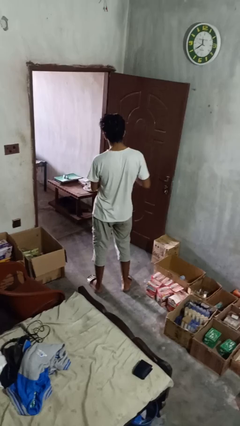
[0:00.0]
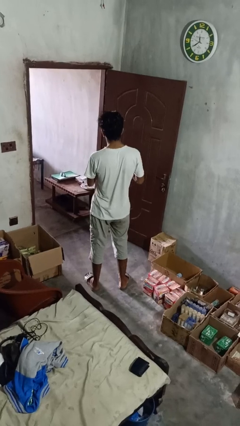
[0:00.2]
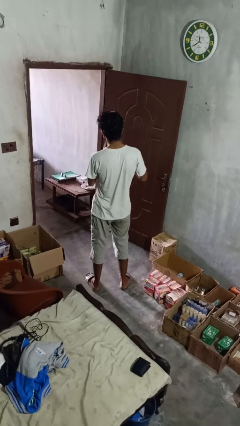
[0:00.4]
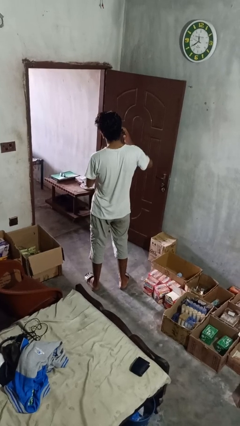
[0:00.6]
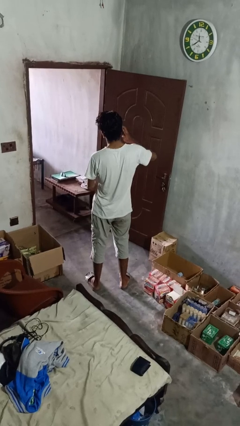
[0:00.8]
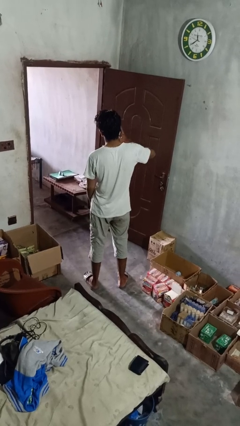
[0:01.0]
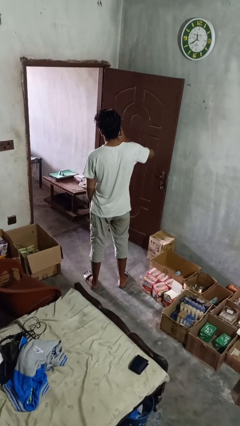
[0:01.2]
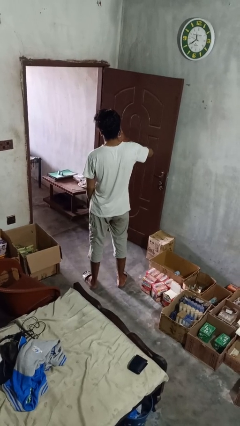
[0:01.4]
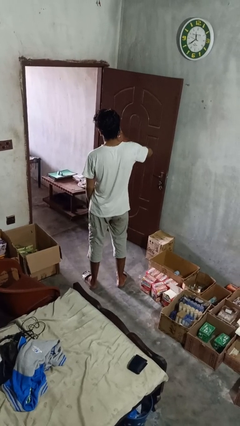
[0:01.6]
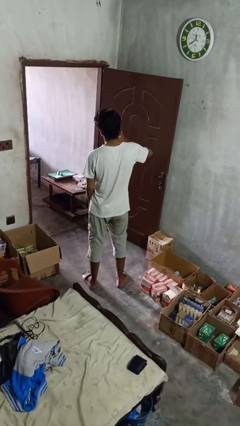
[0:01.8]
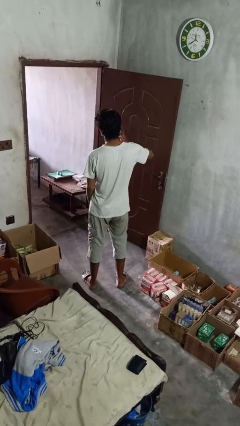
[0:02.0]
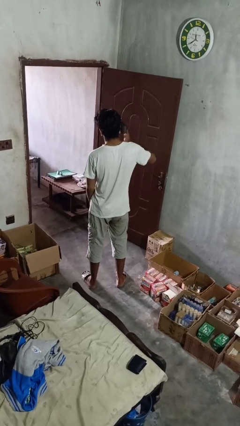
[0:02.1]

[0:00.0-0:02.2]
person takes phone from pocket

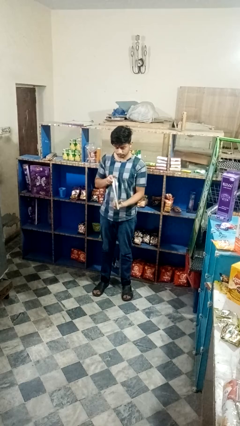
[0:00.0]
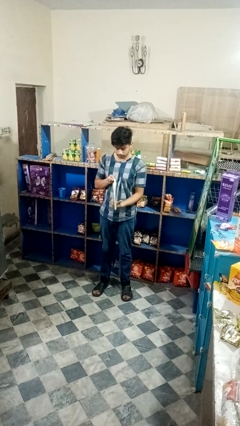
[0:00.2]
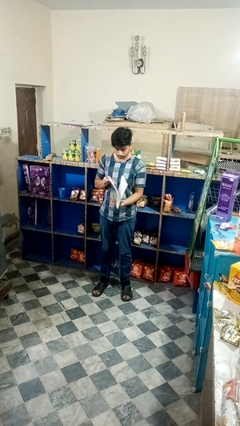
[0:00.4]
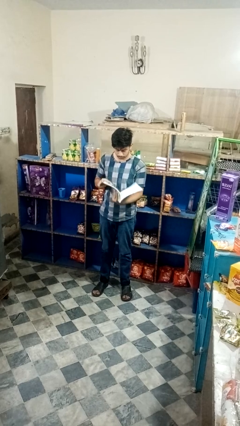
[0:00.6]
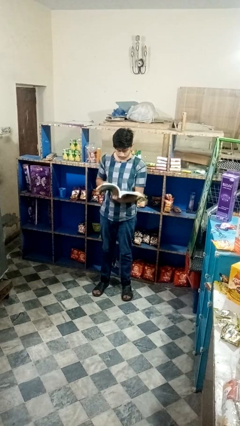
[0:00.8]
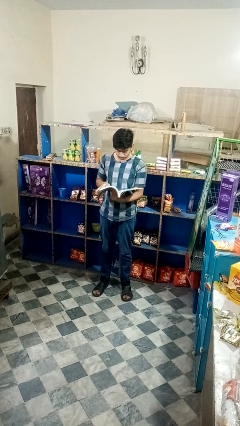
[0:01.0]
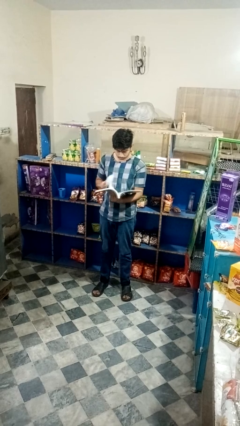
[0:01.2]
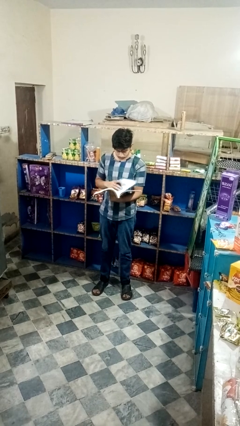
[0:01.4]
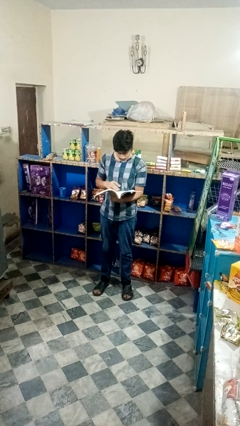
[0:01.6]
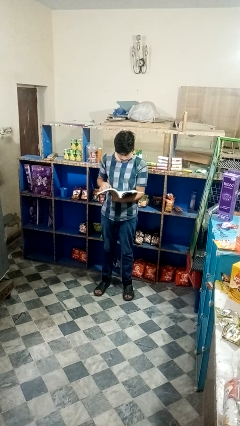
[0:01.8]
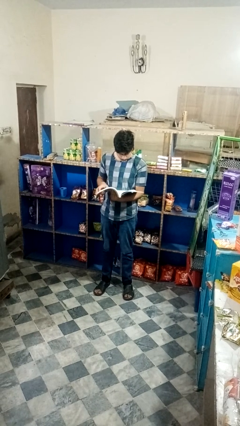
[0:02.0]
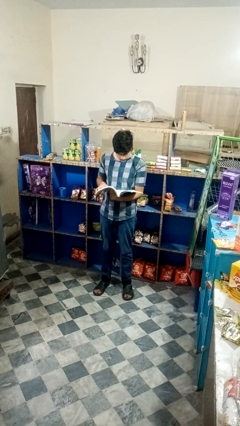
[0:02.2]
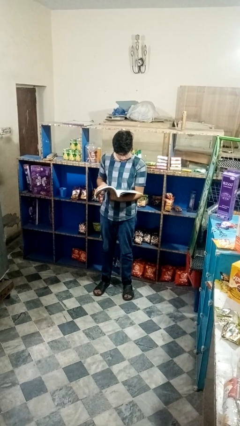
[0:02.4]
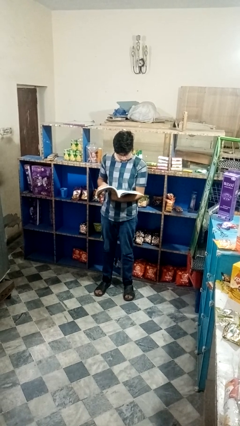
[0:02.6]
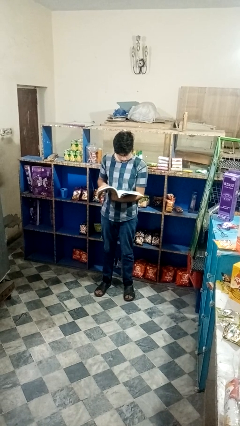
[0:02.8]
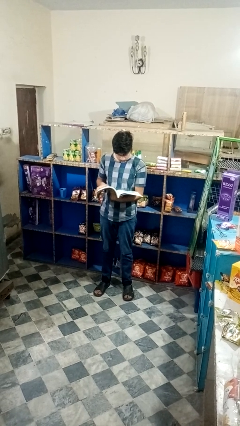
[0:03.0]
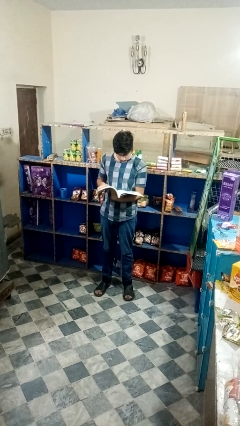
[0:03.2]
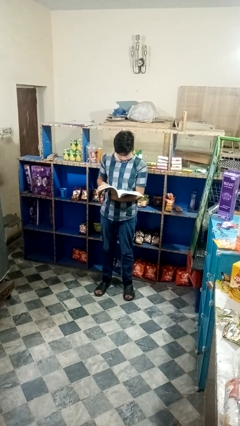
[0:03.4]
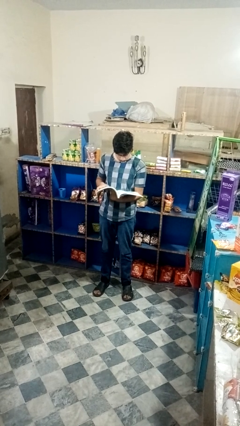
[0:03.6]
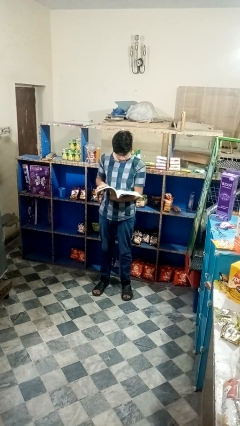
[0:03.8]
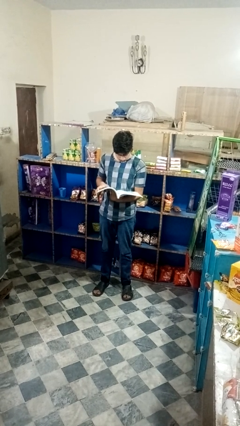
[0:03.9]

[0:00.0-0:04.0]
person reads magazine

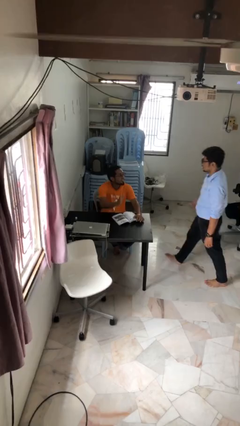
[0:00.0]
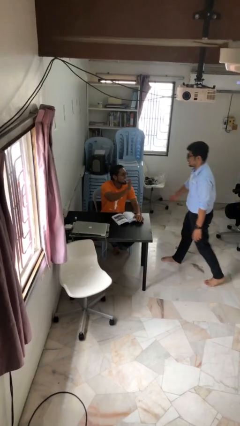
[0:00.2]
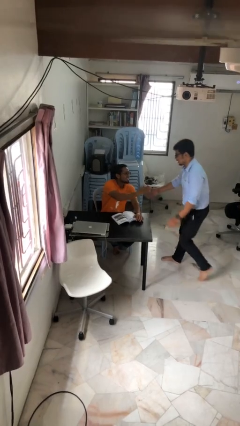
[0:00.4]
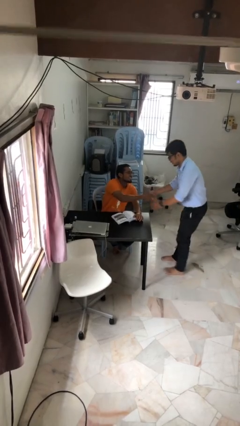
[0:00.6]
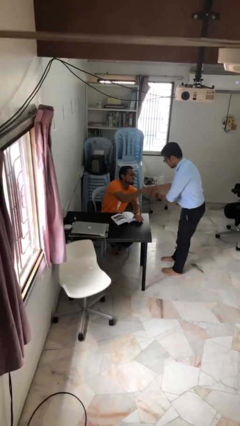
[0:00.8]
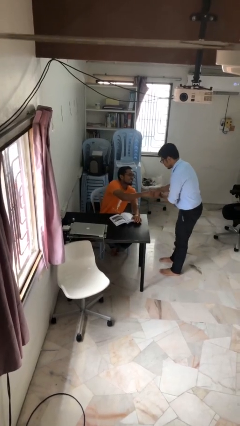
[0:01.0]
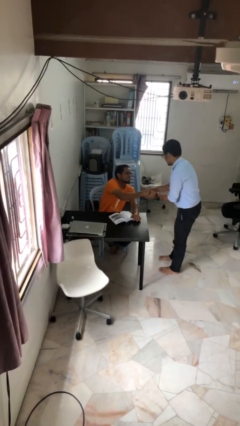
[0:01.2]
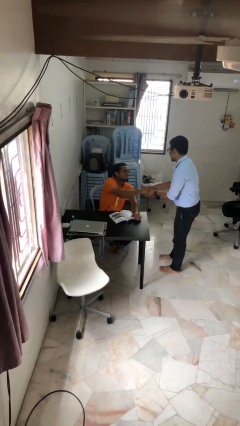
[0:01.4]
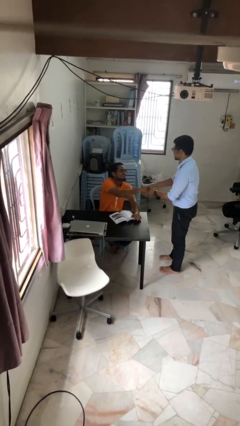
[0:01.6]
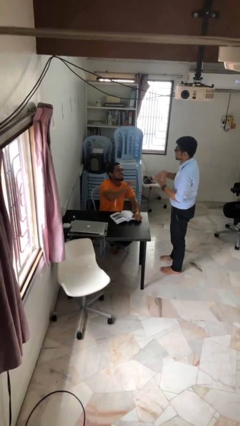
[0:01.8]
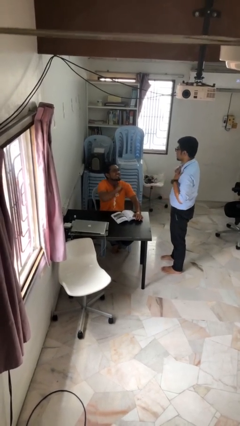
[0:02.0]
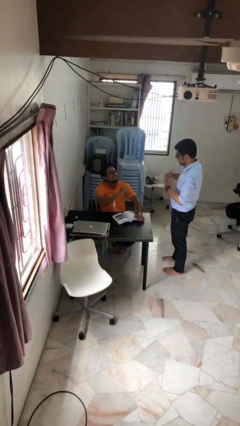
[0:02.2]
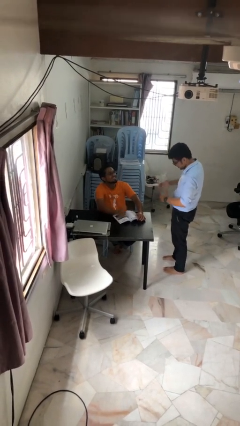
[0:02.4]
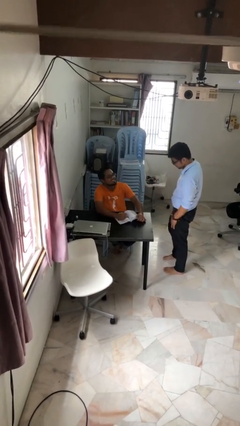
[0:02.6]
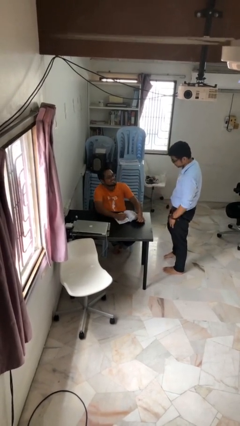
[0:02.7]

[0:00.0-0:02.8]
person shakes hand

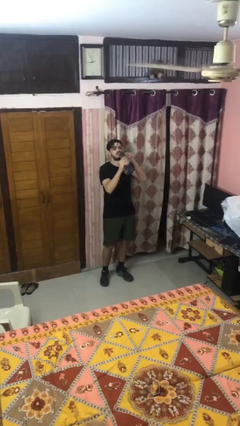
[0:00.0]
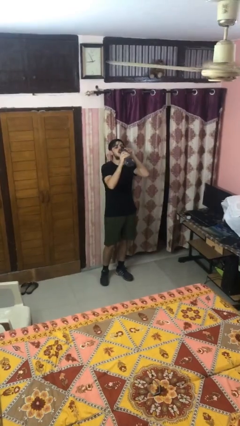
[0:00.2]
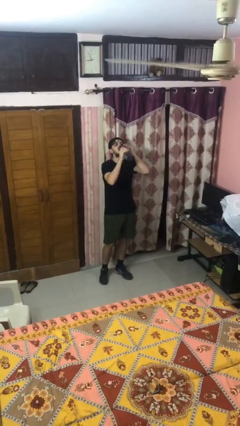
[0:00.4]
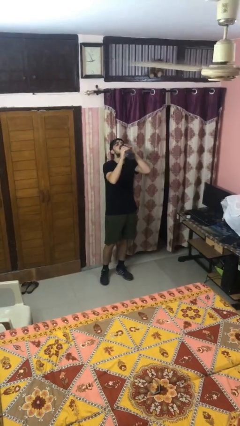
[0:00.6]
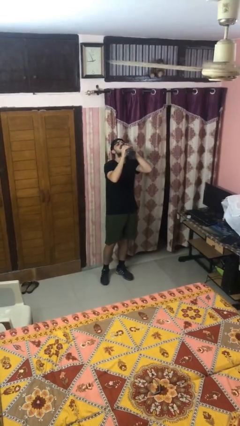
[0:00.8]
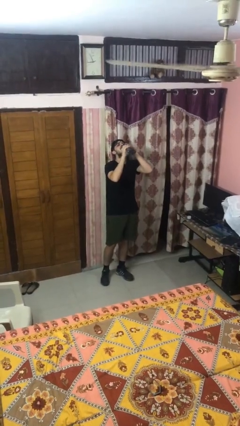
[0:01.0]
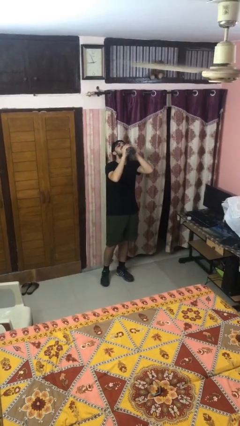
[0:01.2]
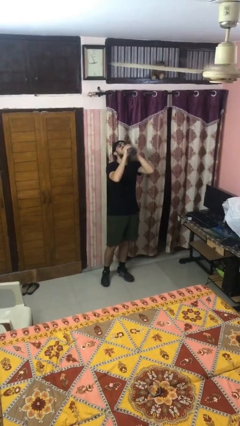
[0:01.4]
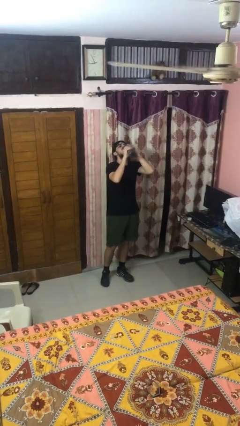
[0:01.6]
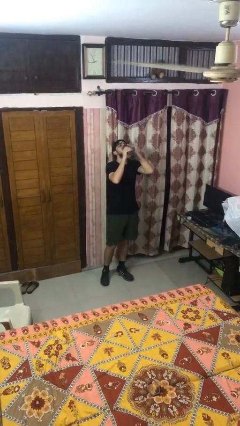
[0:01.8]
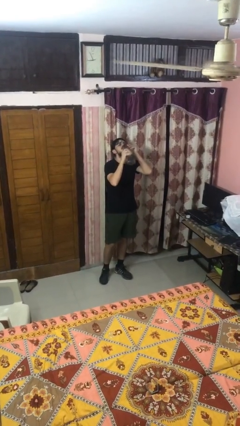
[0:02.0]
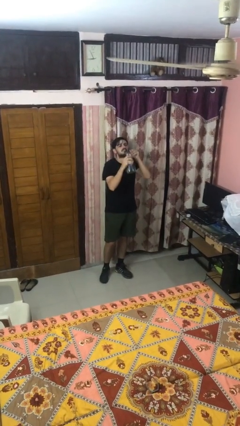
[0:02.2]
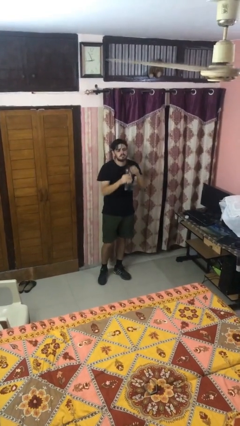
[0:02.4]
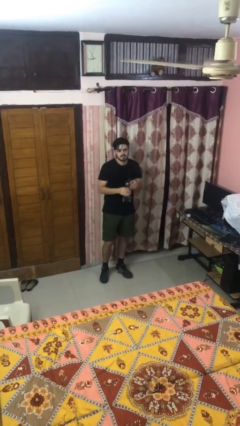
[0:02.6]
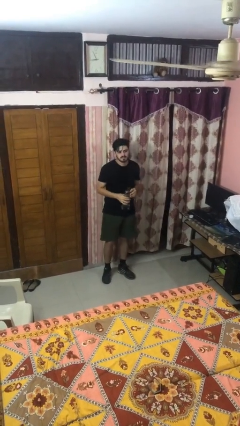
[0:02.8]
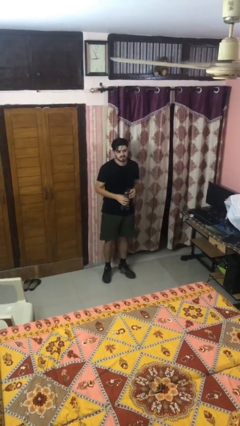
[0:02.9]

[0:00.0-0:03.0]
person drinks from bottle

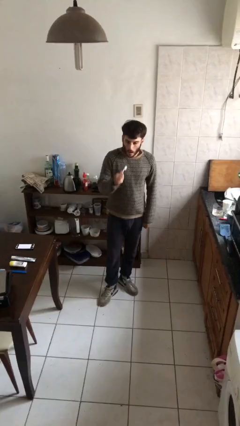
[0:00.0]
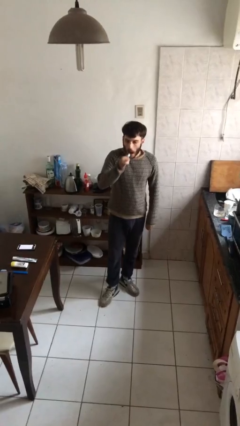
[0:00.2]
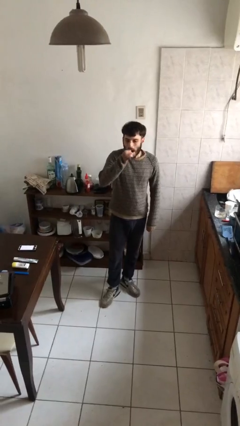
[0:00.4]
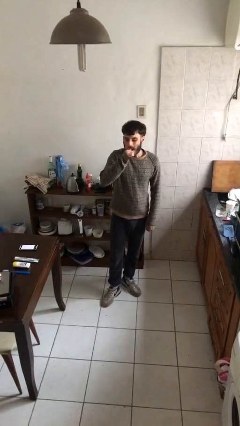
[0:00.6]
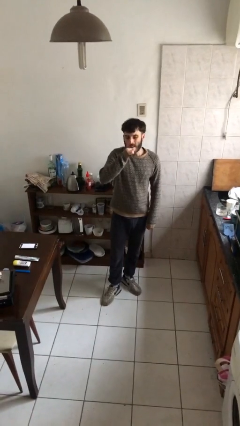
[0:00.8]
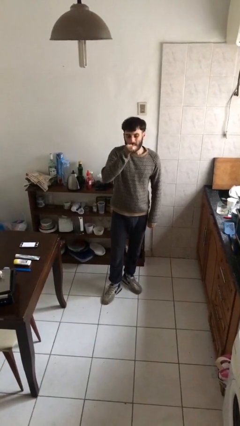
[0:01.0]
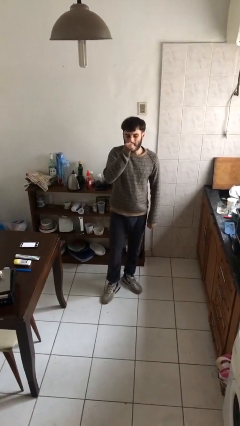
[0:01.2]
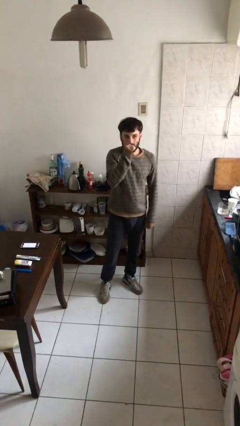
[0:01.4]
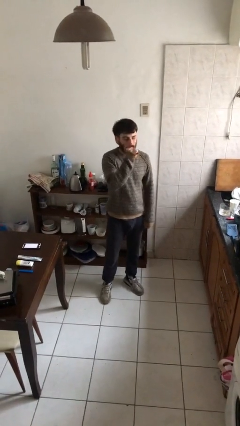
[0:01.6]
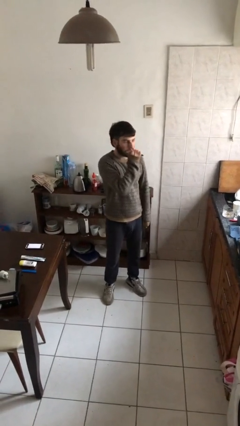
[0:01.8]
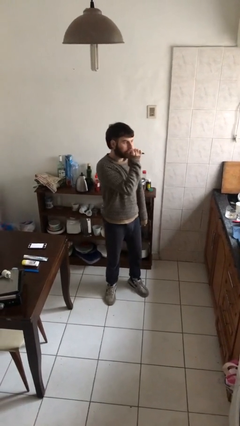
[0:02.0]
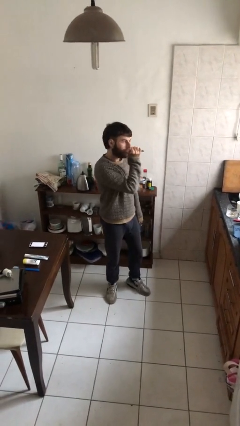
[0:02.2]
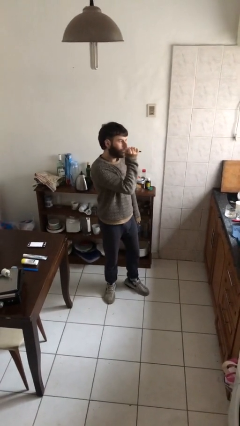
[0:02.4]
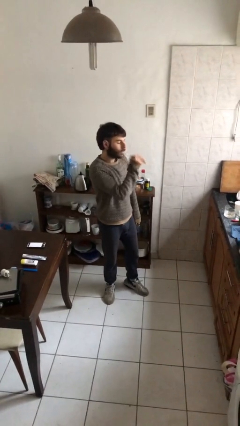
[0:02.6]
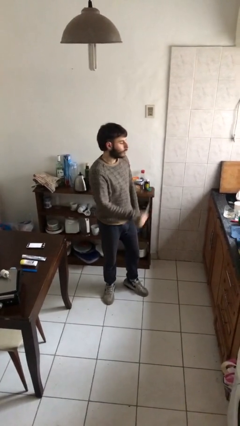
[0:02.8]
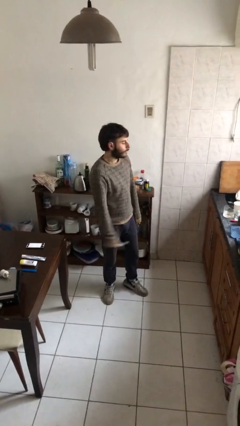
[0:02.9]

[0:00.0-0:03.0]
person brushes teeth

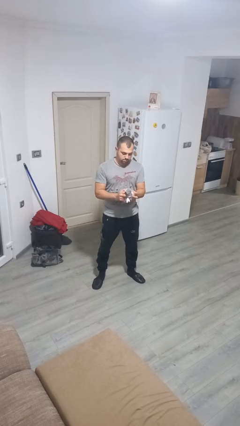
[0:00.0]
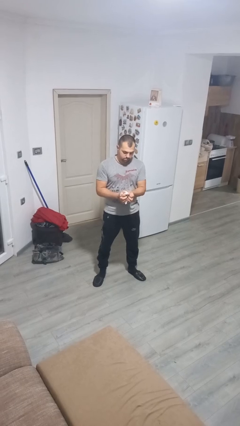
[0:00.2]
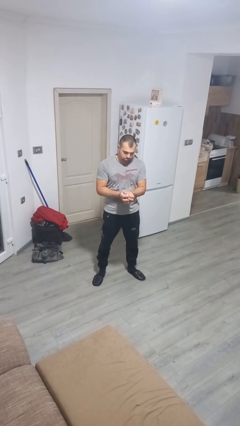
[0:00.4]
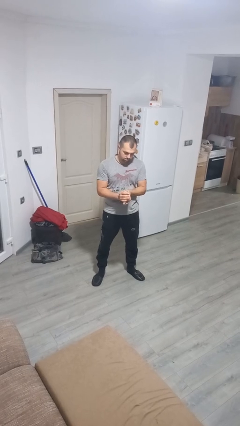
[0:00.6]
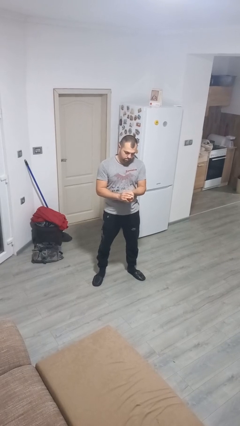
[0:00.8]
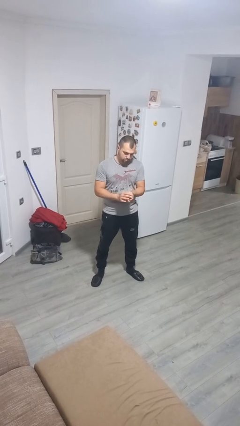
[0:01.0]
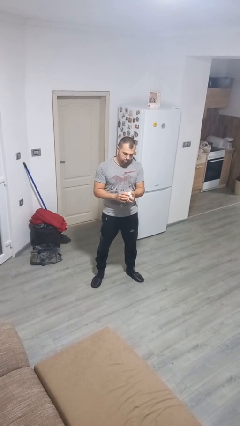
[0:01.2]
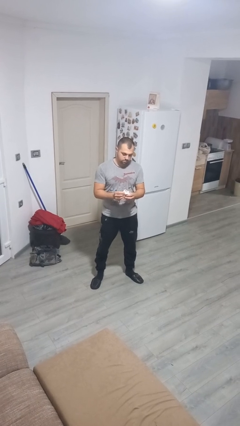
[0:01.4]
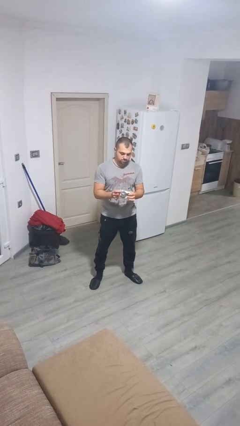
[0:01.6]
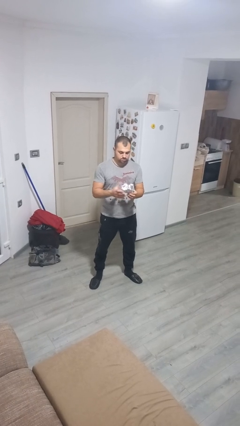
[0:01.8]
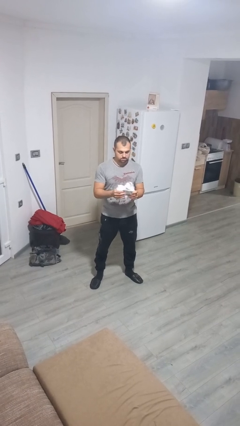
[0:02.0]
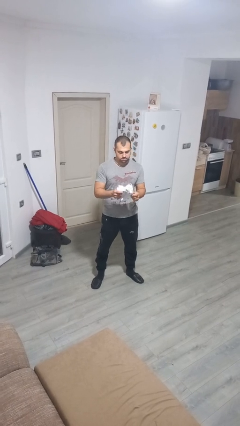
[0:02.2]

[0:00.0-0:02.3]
person crumples paper

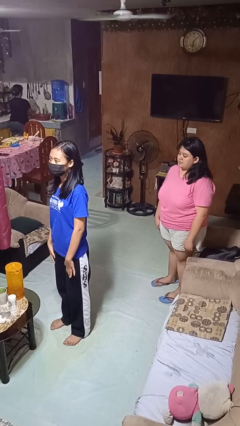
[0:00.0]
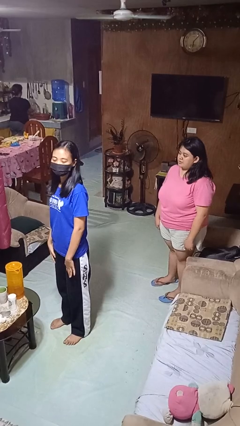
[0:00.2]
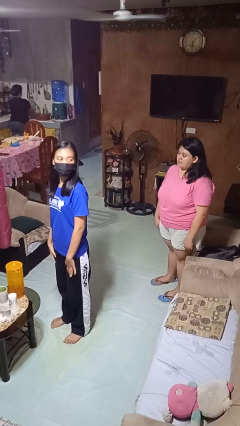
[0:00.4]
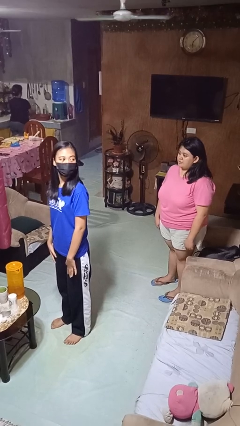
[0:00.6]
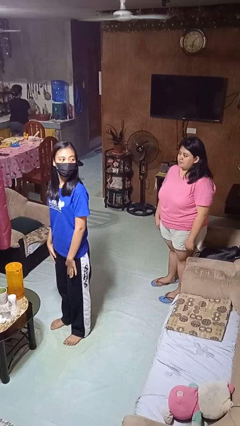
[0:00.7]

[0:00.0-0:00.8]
person looks over shoulder
